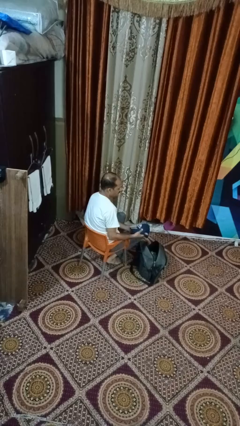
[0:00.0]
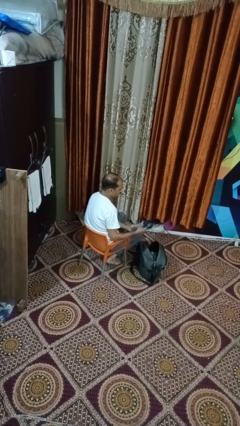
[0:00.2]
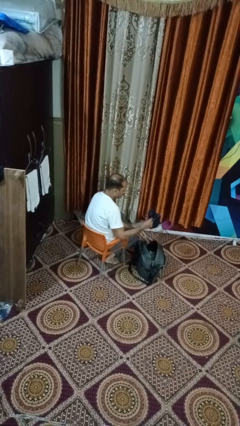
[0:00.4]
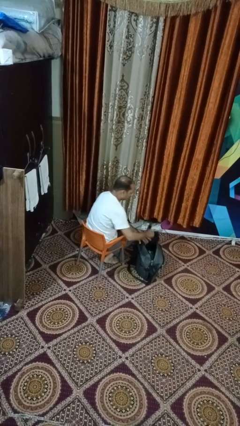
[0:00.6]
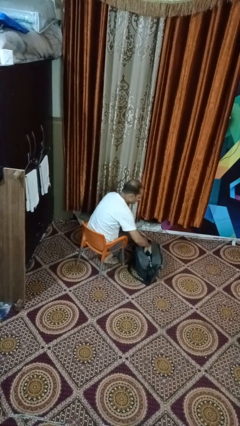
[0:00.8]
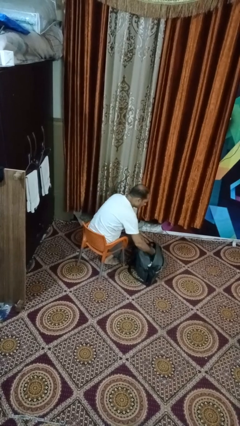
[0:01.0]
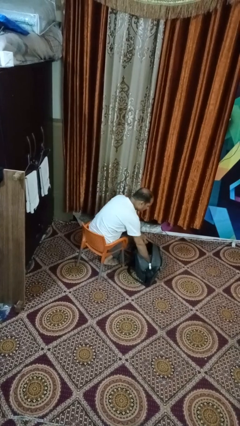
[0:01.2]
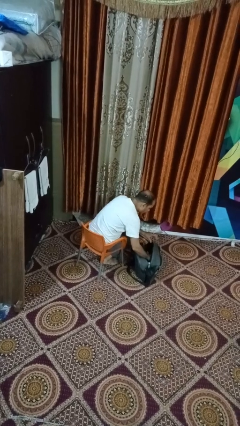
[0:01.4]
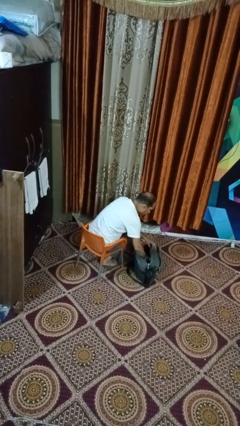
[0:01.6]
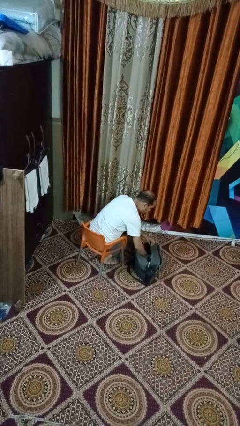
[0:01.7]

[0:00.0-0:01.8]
person puts object into backpack

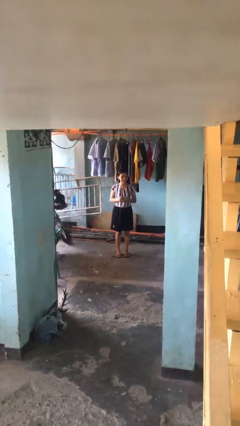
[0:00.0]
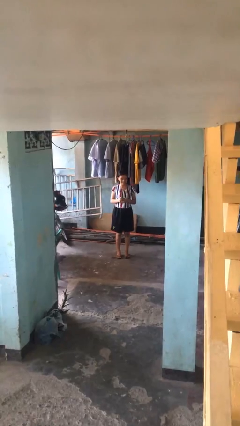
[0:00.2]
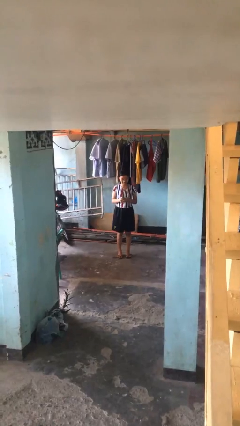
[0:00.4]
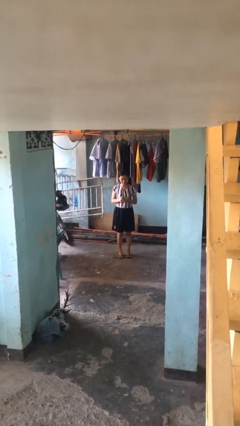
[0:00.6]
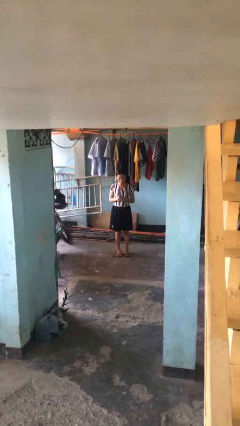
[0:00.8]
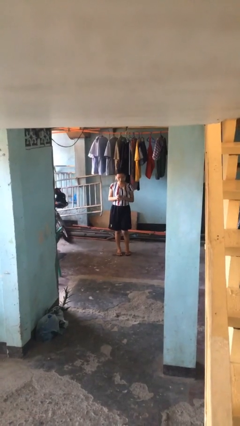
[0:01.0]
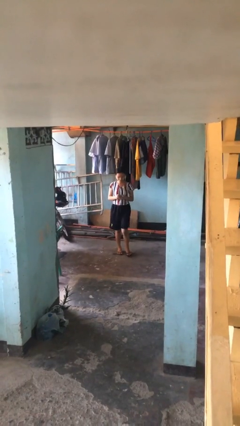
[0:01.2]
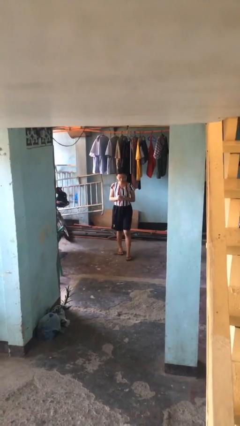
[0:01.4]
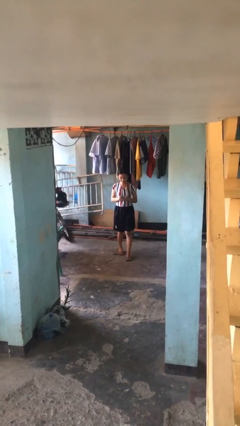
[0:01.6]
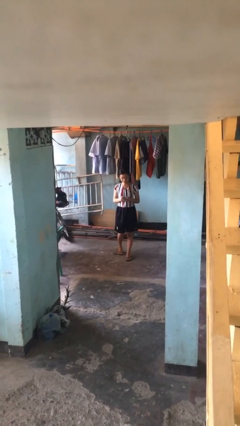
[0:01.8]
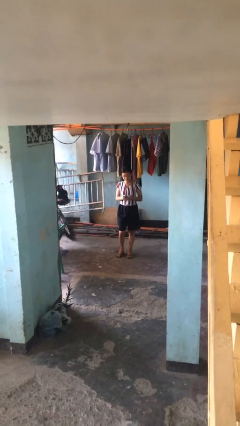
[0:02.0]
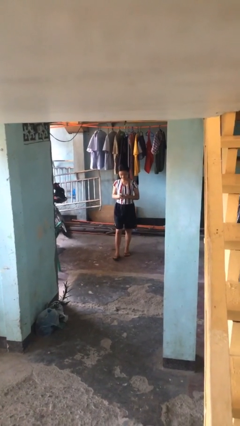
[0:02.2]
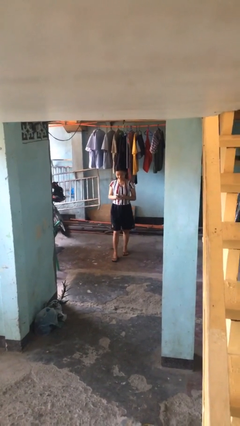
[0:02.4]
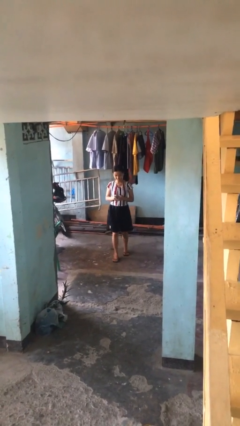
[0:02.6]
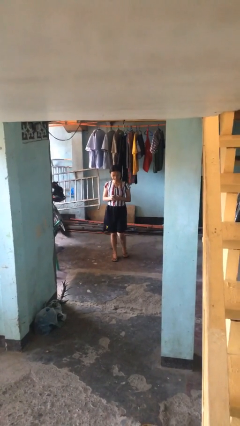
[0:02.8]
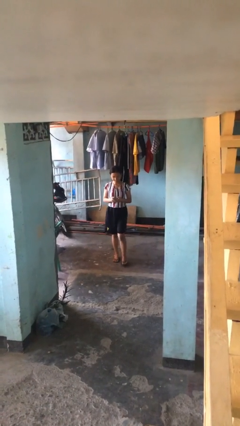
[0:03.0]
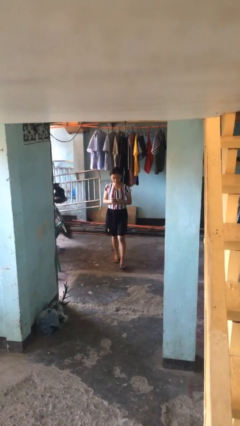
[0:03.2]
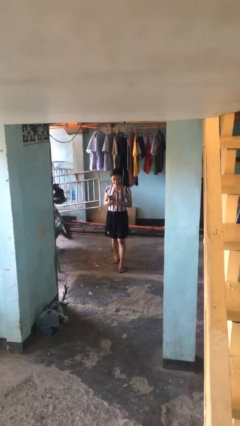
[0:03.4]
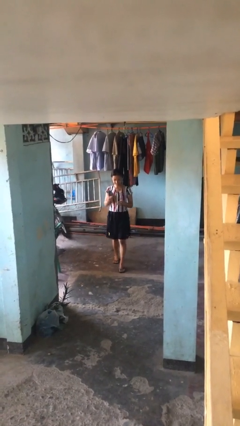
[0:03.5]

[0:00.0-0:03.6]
person texts on phone

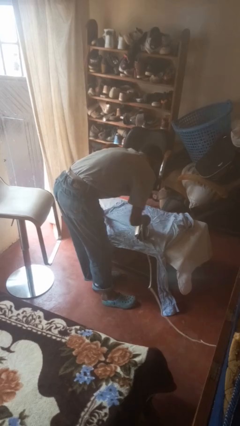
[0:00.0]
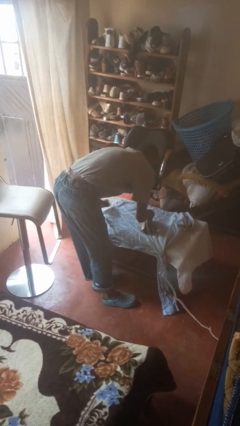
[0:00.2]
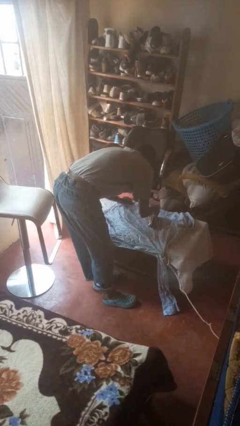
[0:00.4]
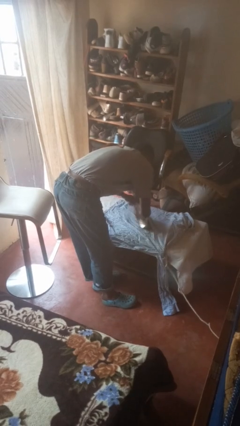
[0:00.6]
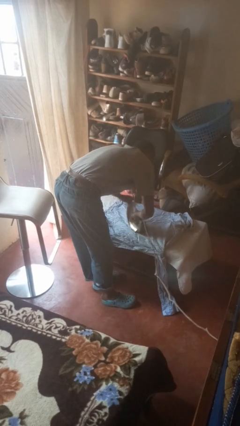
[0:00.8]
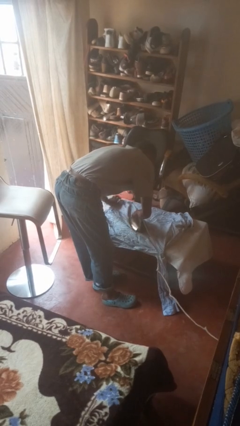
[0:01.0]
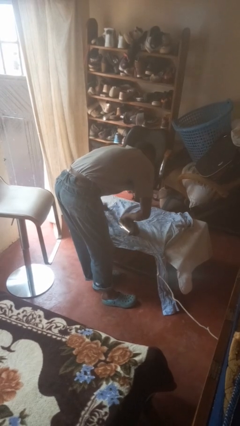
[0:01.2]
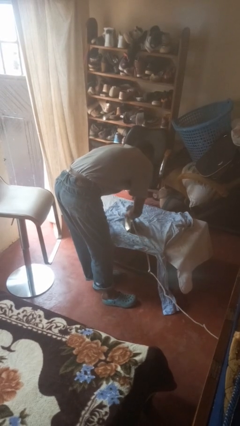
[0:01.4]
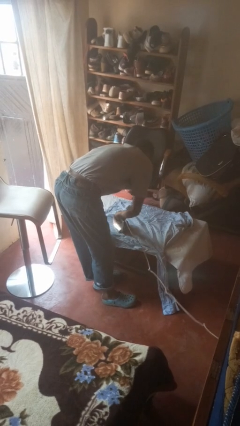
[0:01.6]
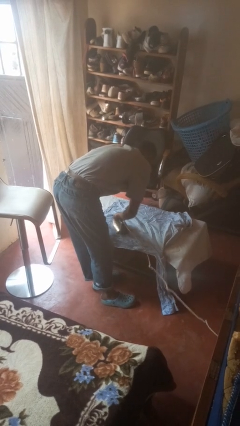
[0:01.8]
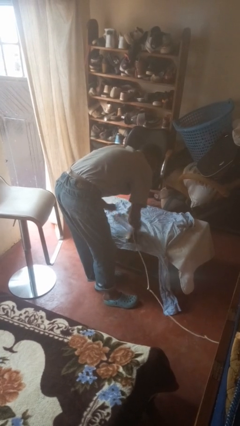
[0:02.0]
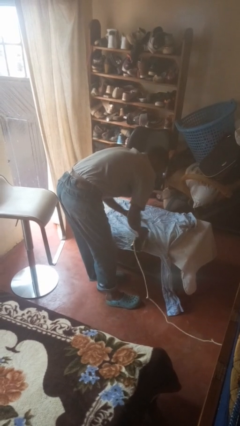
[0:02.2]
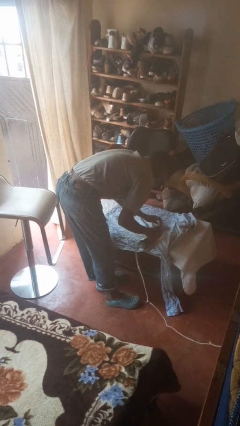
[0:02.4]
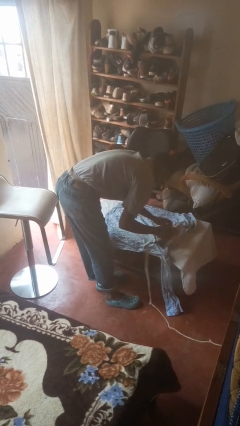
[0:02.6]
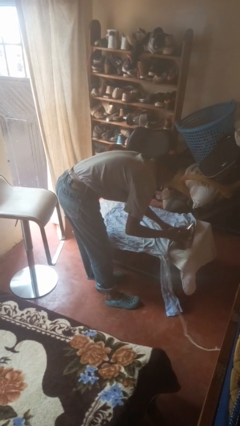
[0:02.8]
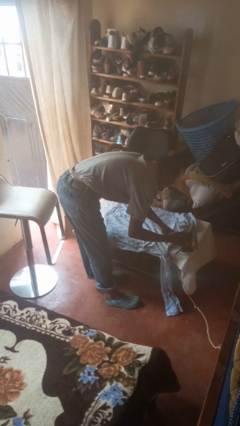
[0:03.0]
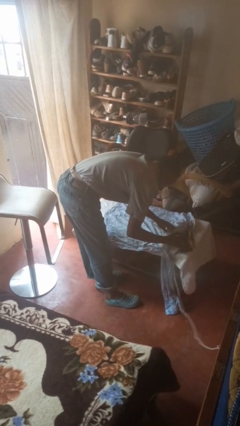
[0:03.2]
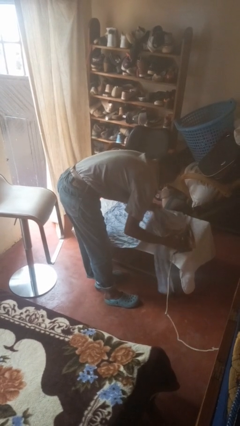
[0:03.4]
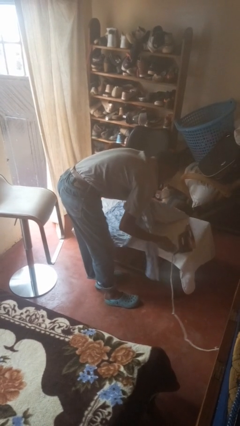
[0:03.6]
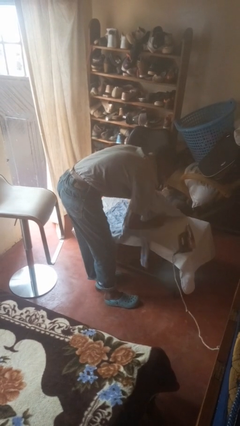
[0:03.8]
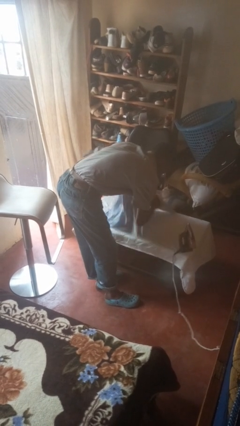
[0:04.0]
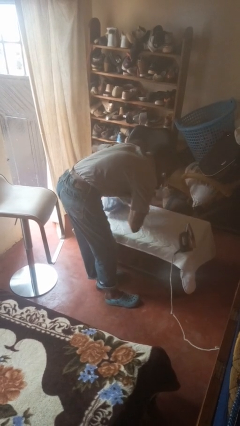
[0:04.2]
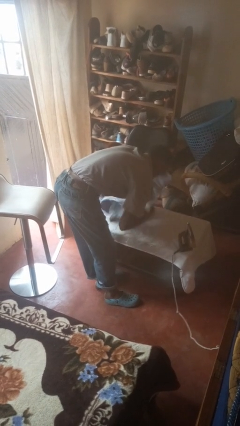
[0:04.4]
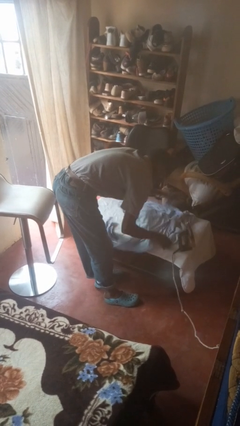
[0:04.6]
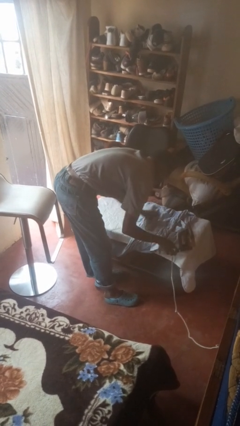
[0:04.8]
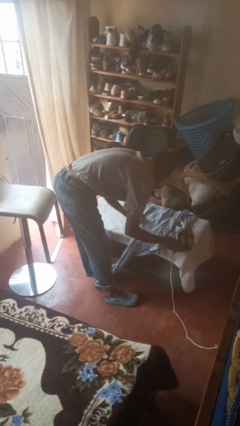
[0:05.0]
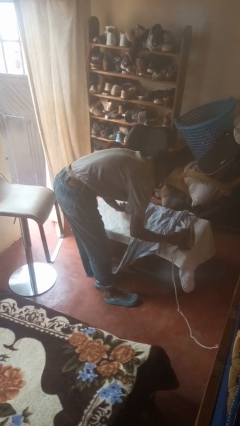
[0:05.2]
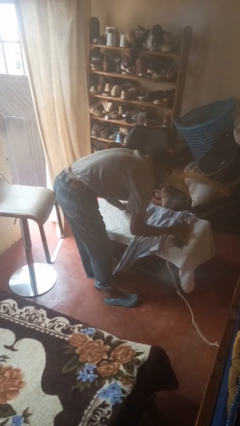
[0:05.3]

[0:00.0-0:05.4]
person irons clothes

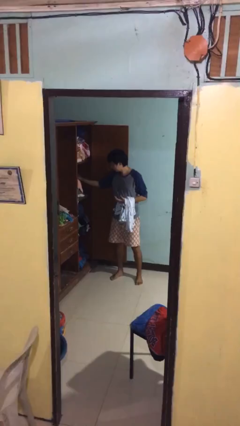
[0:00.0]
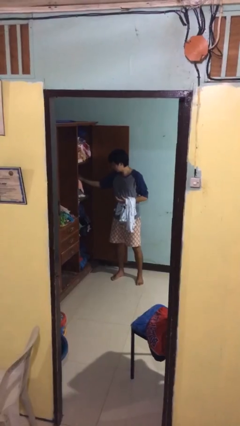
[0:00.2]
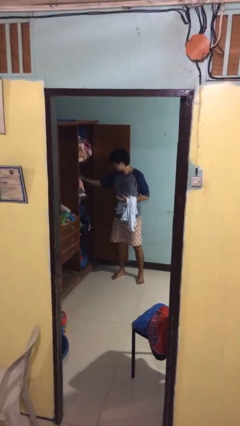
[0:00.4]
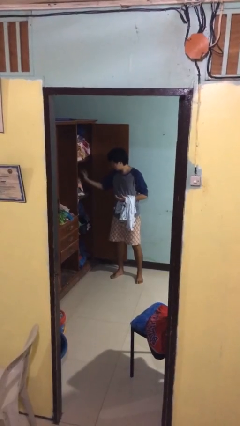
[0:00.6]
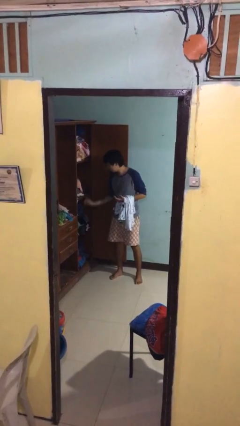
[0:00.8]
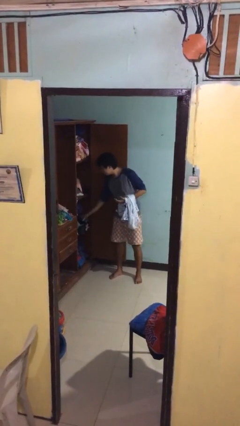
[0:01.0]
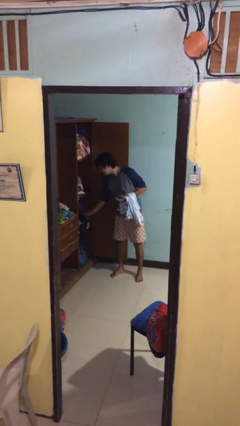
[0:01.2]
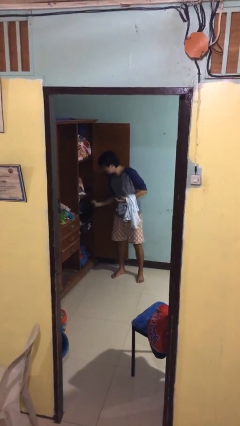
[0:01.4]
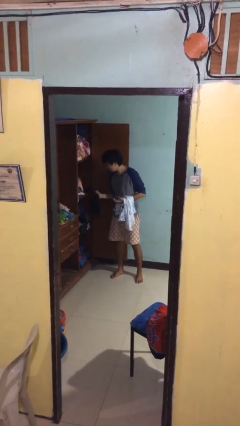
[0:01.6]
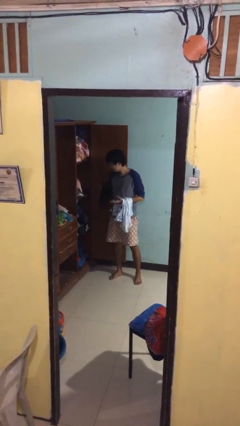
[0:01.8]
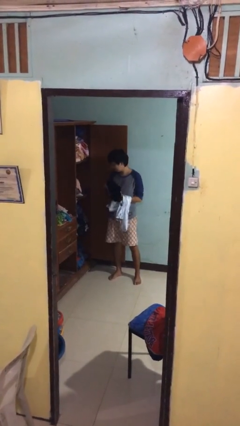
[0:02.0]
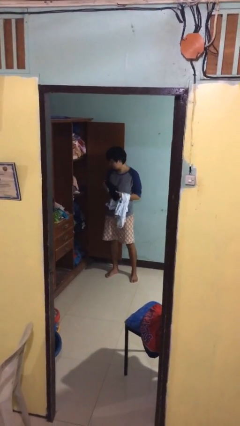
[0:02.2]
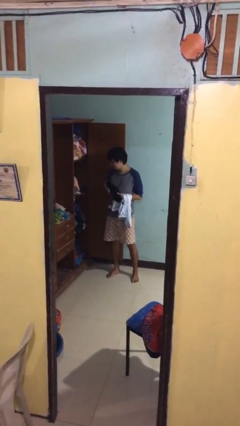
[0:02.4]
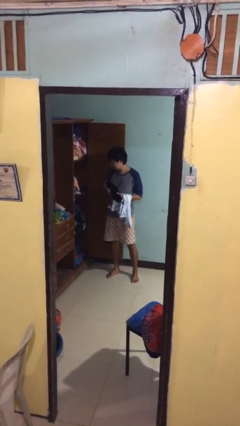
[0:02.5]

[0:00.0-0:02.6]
person takes clothes from dresser

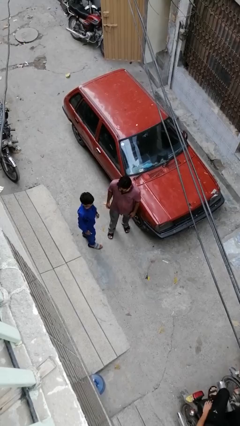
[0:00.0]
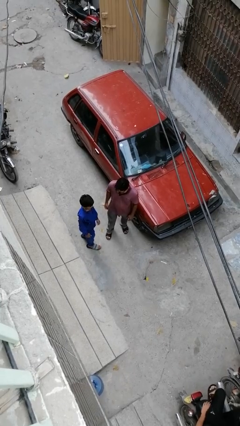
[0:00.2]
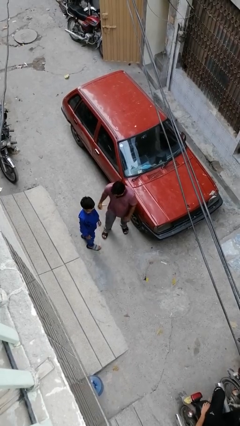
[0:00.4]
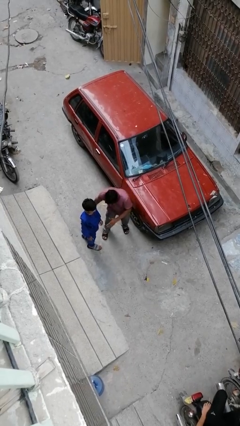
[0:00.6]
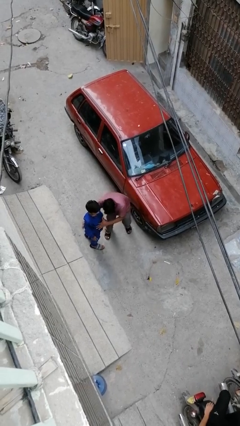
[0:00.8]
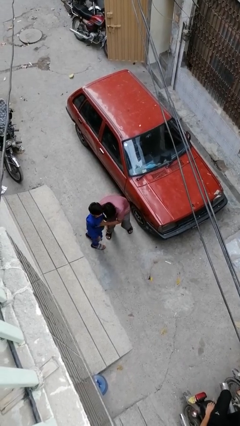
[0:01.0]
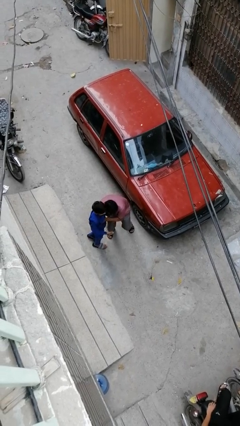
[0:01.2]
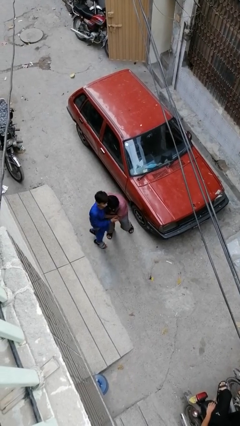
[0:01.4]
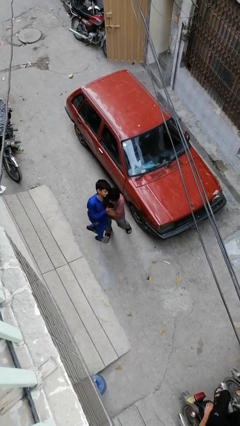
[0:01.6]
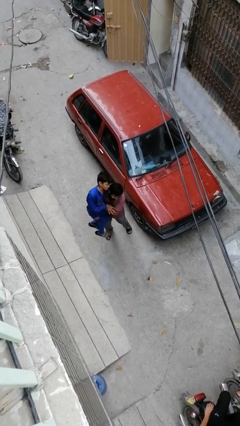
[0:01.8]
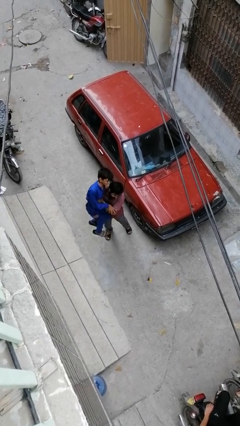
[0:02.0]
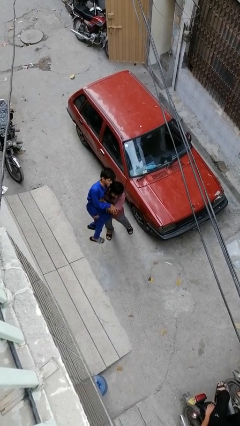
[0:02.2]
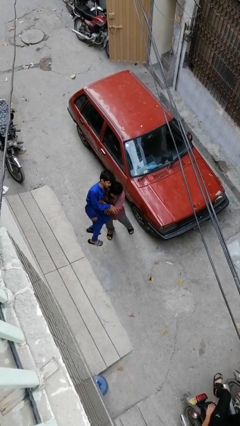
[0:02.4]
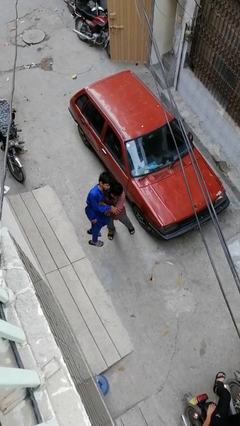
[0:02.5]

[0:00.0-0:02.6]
person picks up person

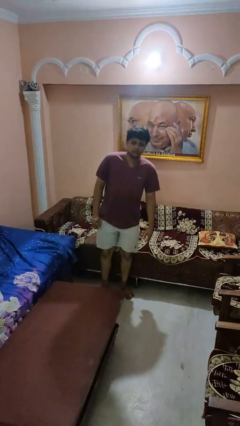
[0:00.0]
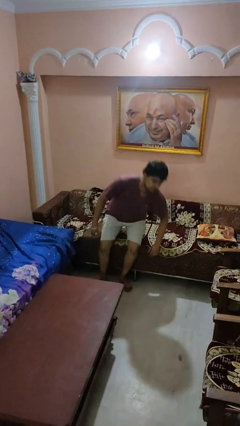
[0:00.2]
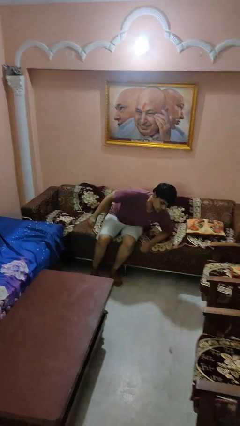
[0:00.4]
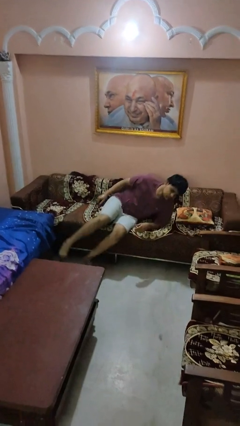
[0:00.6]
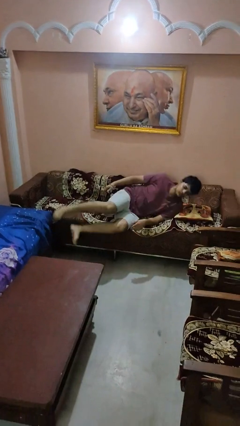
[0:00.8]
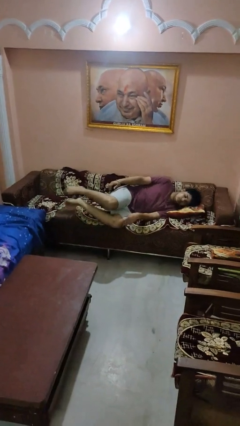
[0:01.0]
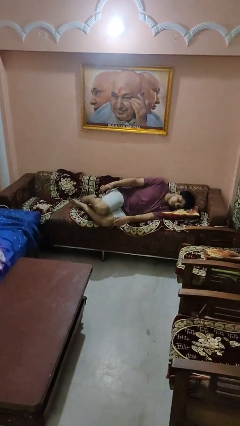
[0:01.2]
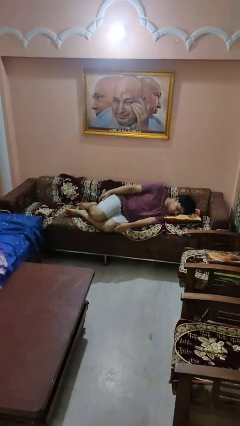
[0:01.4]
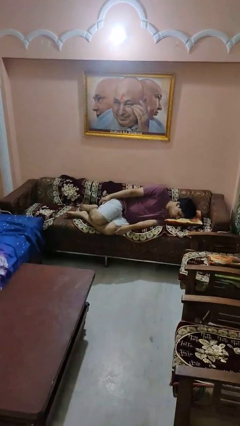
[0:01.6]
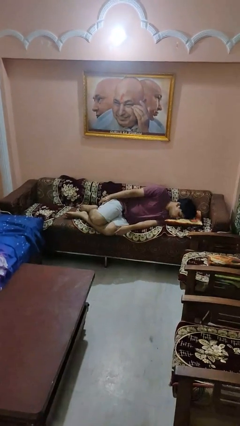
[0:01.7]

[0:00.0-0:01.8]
person lies down on couch
